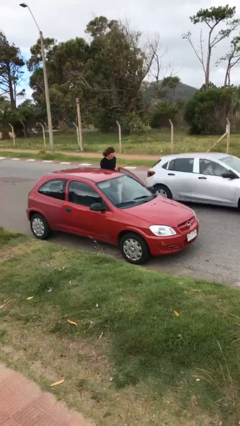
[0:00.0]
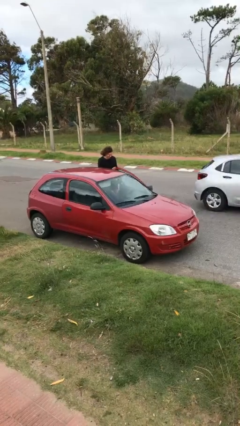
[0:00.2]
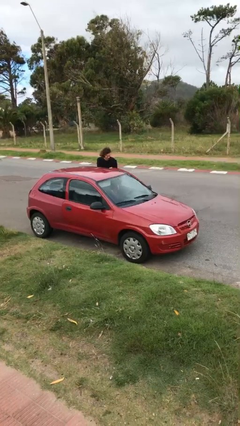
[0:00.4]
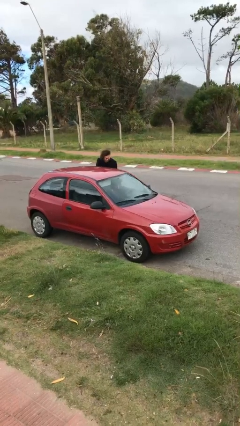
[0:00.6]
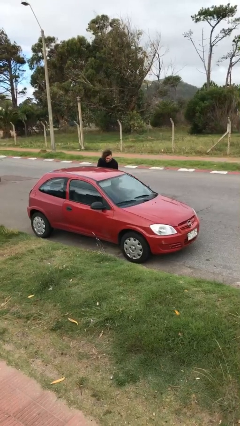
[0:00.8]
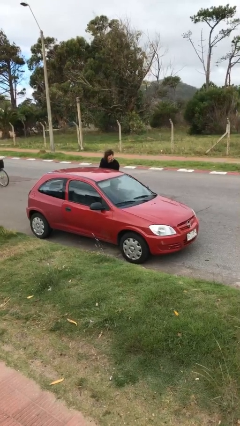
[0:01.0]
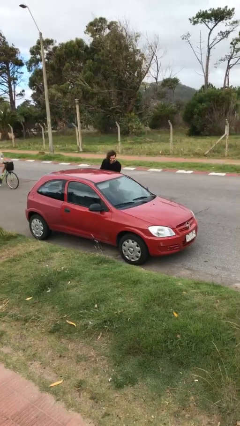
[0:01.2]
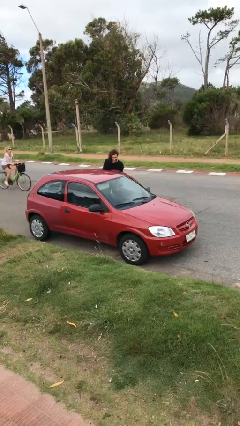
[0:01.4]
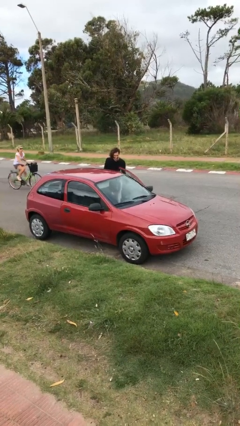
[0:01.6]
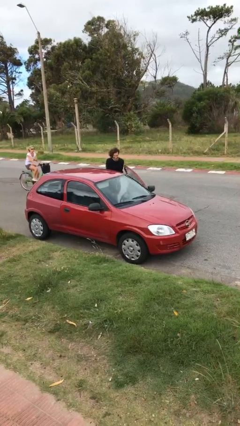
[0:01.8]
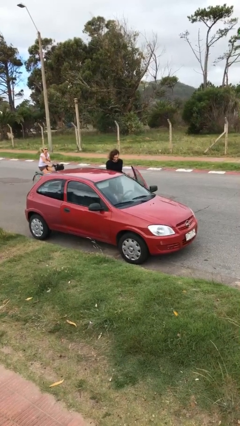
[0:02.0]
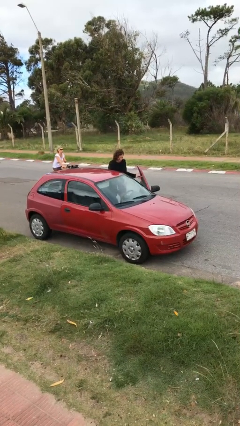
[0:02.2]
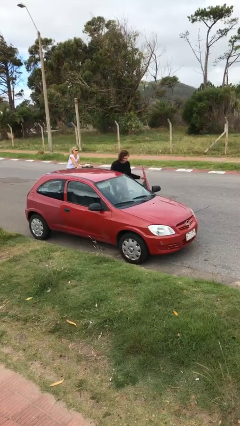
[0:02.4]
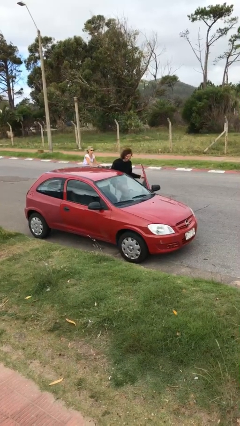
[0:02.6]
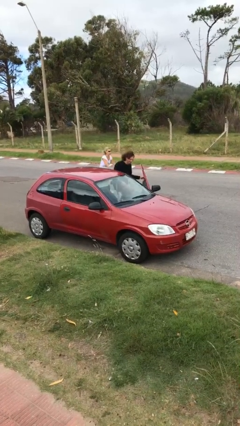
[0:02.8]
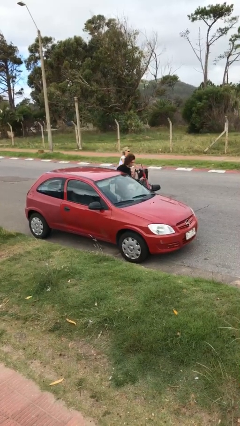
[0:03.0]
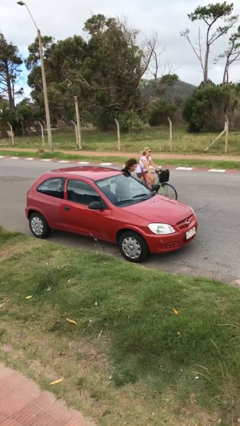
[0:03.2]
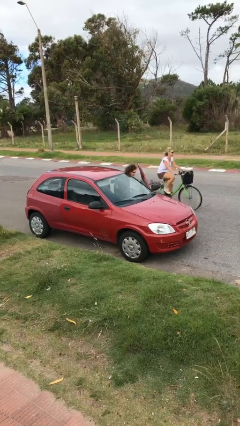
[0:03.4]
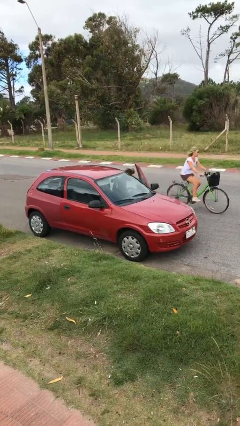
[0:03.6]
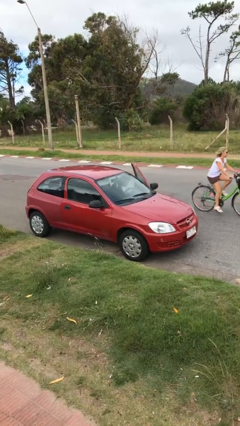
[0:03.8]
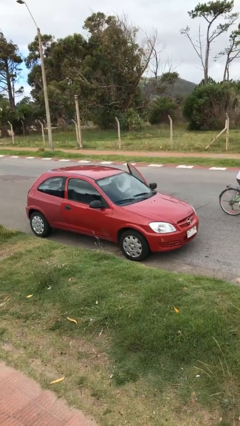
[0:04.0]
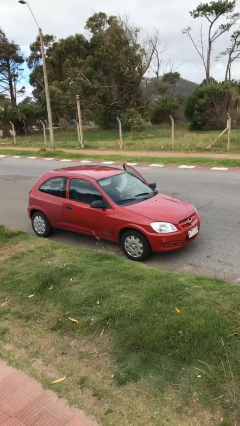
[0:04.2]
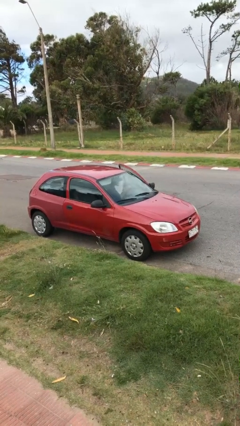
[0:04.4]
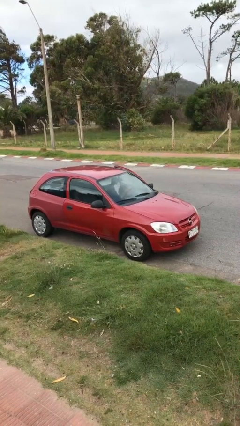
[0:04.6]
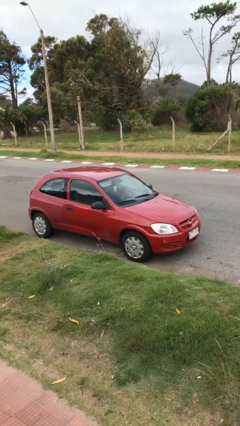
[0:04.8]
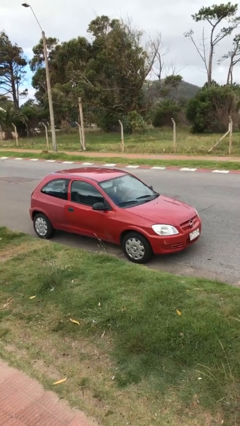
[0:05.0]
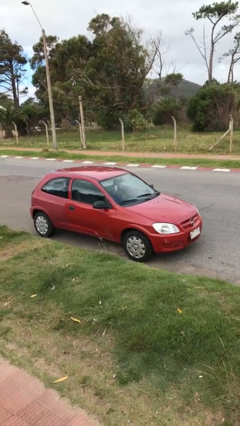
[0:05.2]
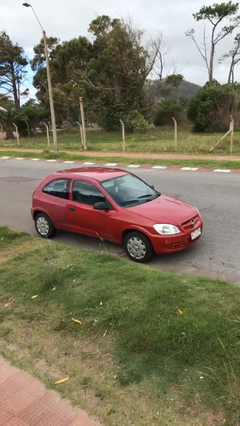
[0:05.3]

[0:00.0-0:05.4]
car picks up person

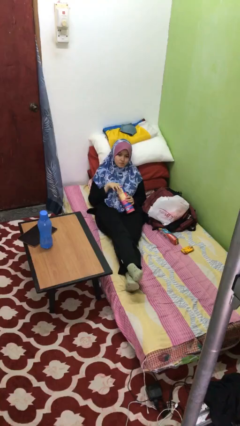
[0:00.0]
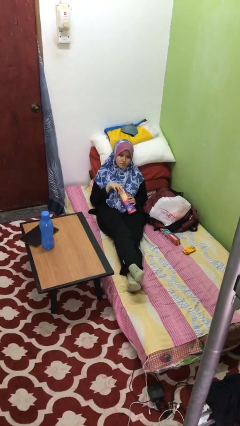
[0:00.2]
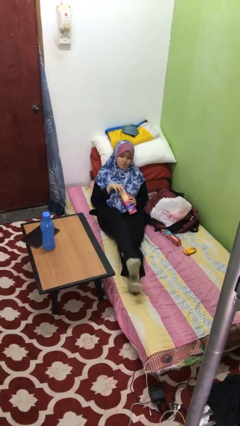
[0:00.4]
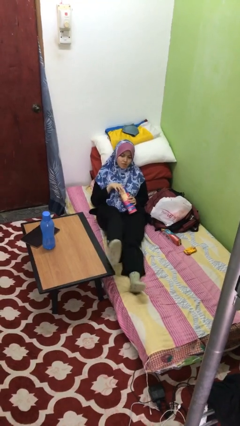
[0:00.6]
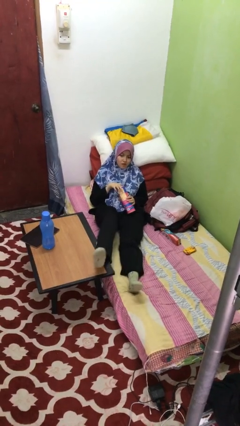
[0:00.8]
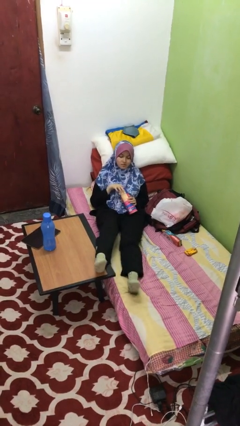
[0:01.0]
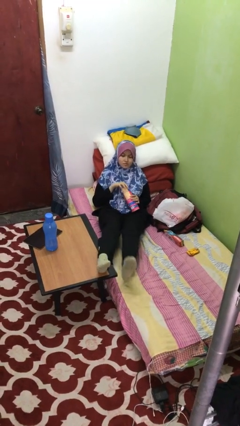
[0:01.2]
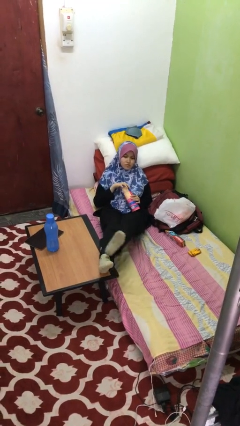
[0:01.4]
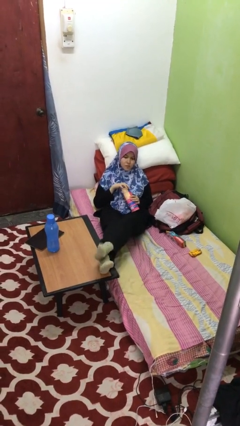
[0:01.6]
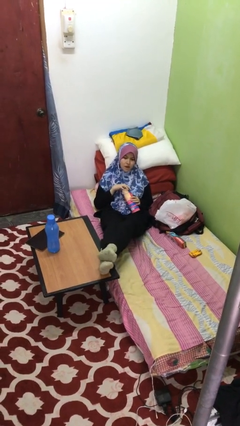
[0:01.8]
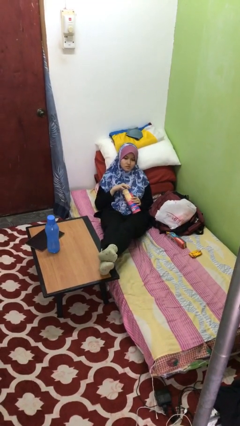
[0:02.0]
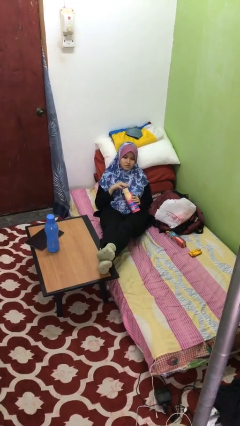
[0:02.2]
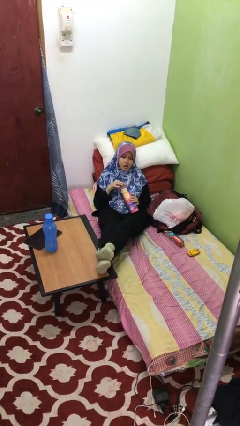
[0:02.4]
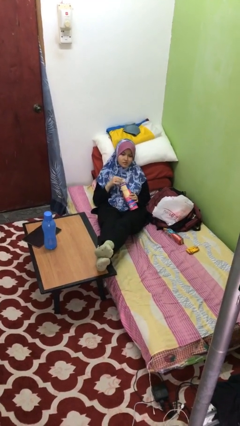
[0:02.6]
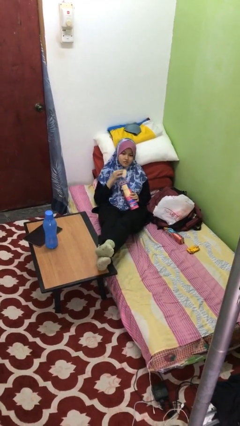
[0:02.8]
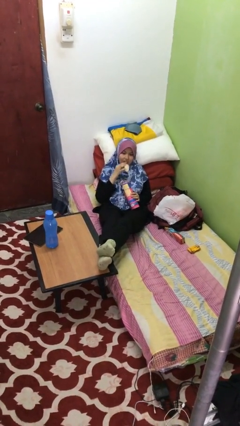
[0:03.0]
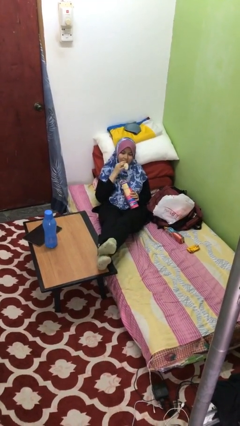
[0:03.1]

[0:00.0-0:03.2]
person puts feet up

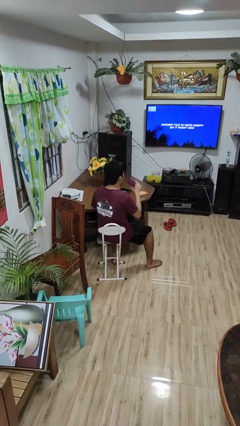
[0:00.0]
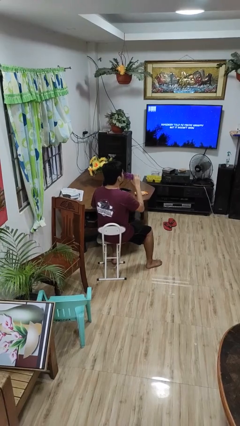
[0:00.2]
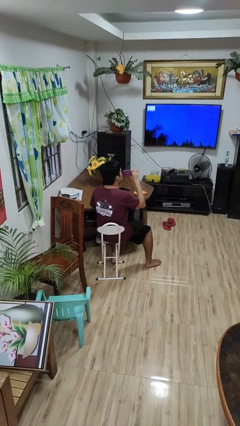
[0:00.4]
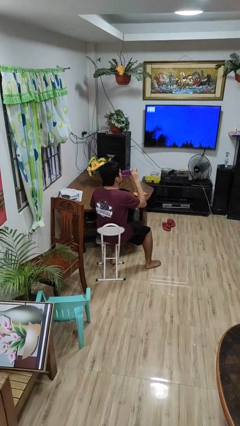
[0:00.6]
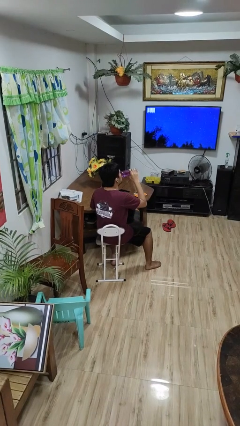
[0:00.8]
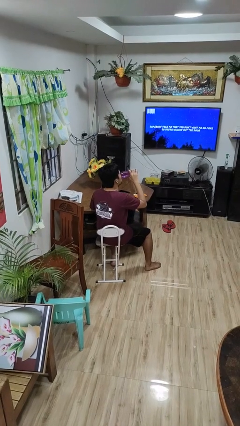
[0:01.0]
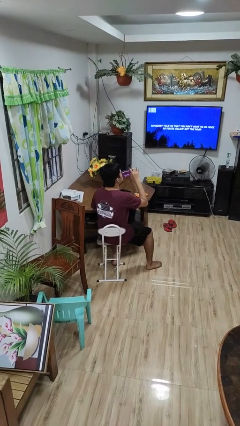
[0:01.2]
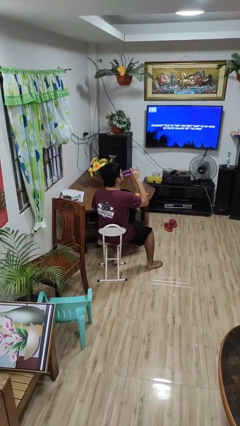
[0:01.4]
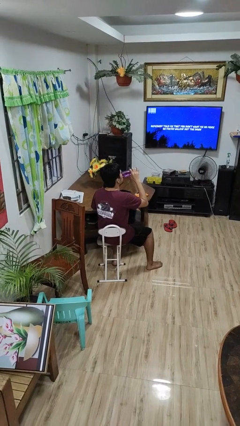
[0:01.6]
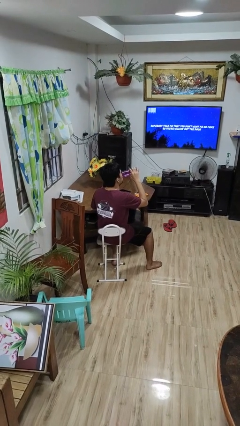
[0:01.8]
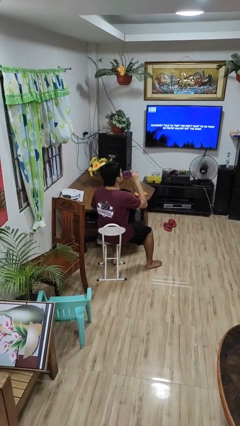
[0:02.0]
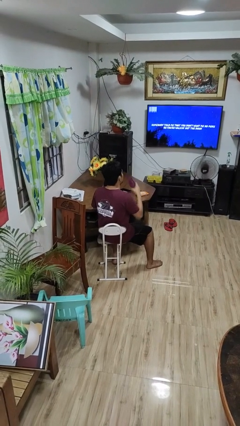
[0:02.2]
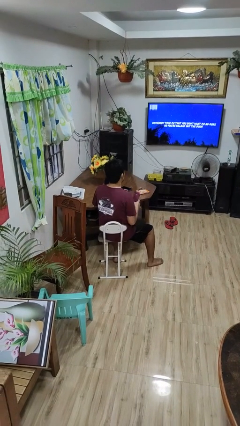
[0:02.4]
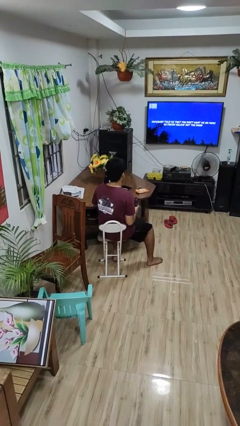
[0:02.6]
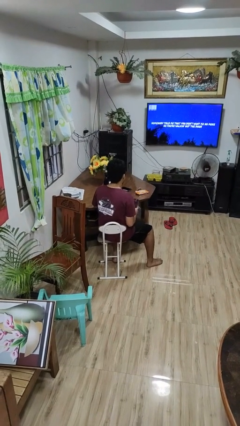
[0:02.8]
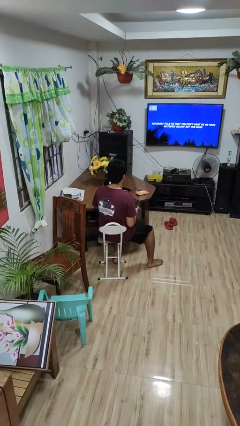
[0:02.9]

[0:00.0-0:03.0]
person drinks from bottle

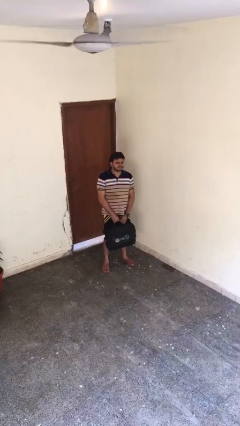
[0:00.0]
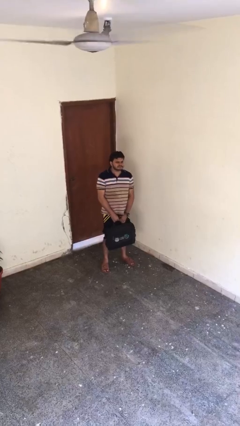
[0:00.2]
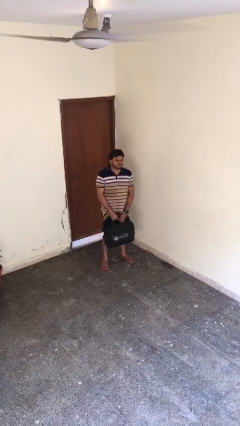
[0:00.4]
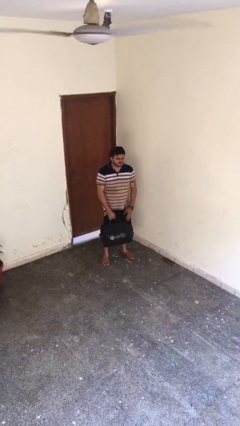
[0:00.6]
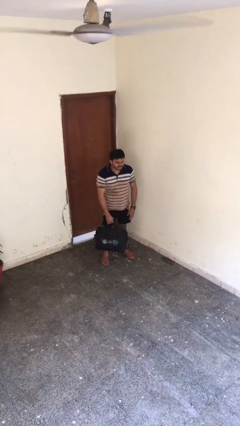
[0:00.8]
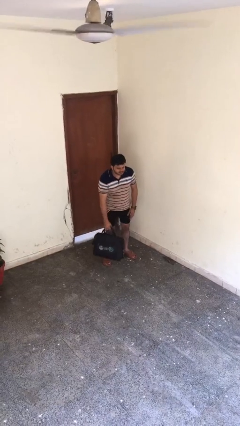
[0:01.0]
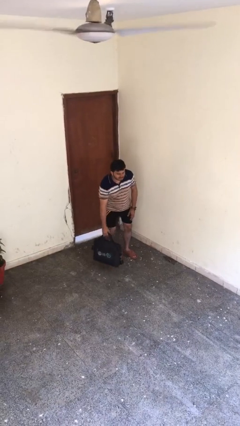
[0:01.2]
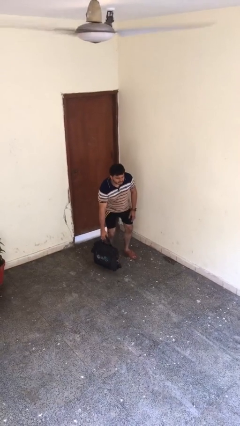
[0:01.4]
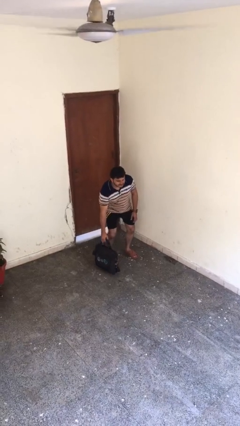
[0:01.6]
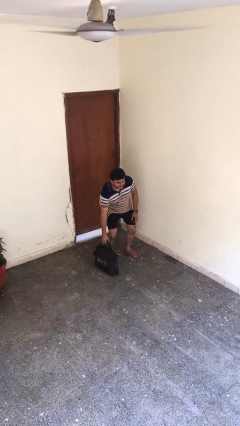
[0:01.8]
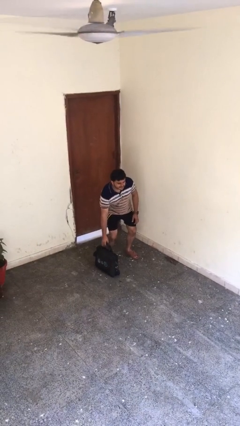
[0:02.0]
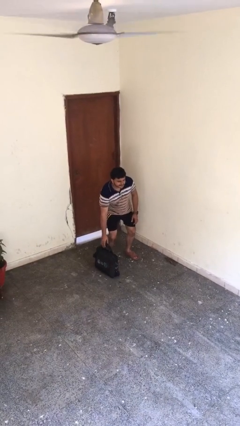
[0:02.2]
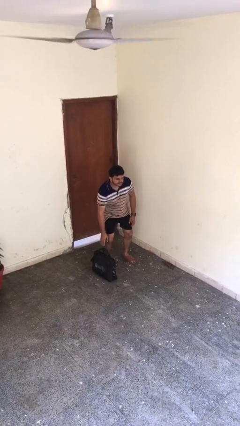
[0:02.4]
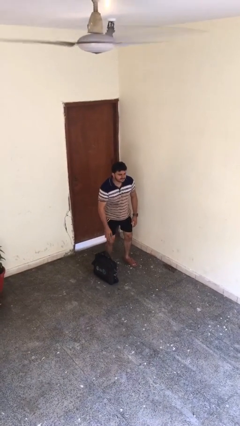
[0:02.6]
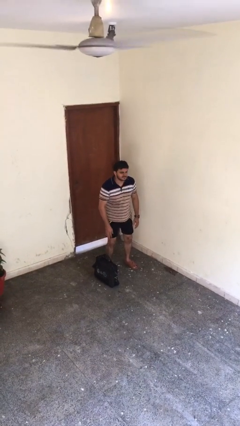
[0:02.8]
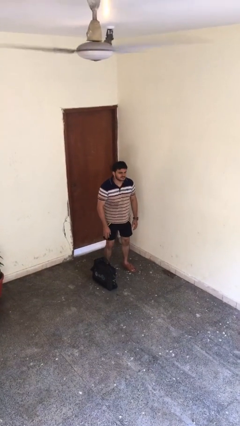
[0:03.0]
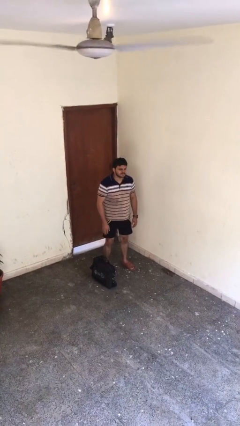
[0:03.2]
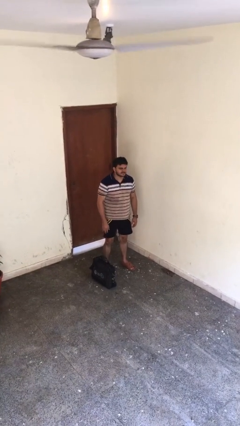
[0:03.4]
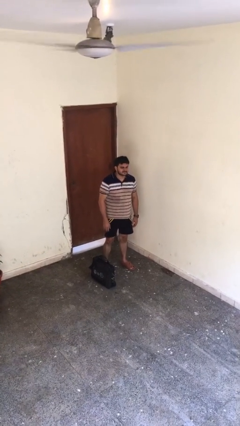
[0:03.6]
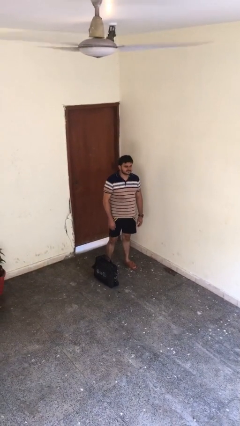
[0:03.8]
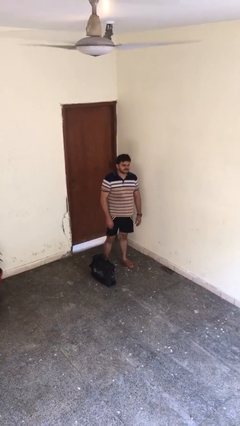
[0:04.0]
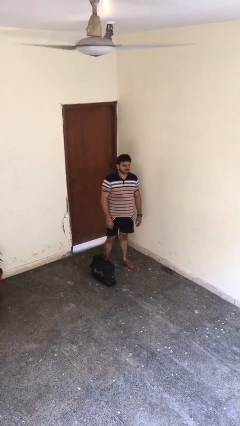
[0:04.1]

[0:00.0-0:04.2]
person puts down object on floor

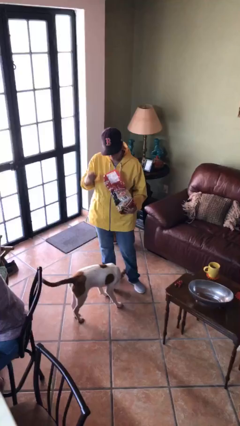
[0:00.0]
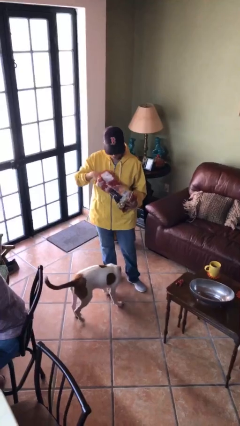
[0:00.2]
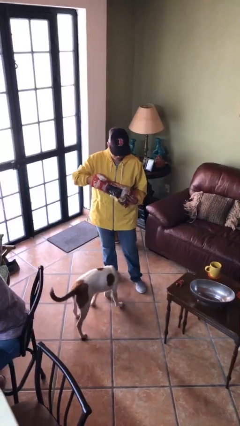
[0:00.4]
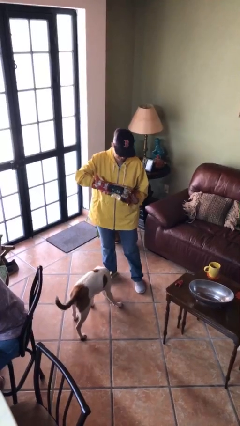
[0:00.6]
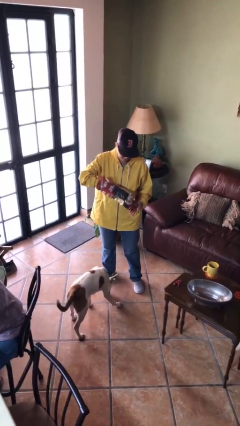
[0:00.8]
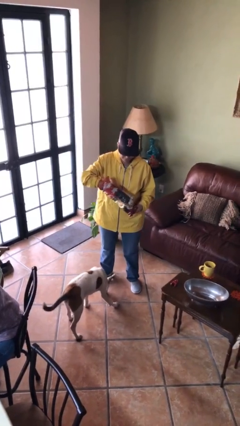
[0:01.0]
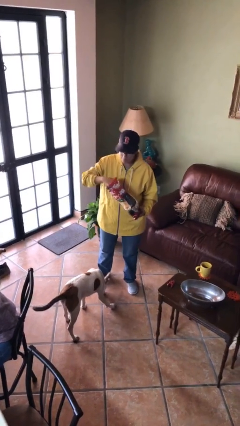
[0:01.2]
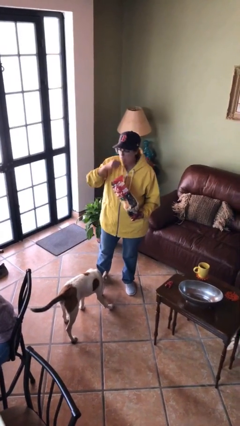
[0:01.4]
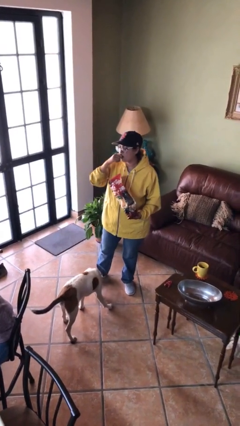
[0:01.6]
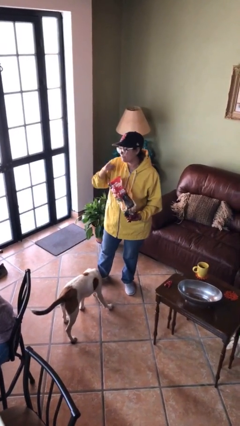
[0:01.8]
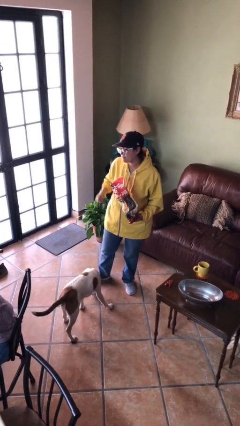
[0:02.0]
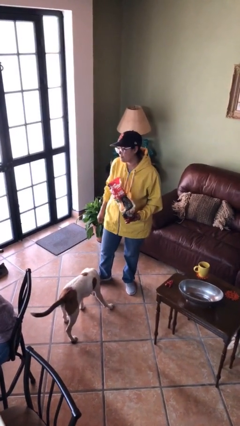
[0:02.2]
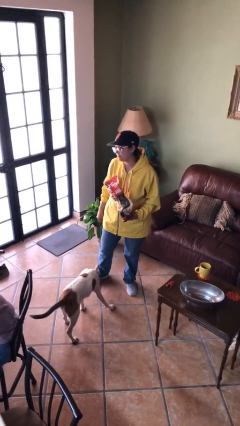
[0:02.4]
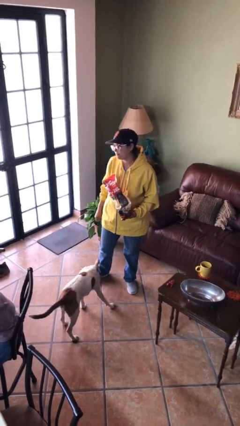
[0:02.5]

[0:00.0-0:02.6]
person eats snack from bag
